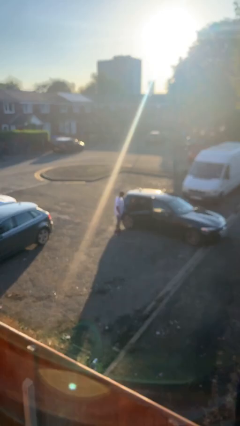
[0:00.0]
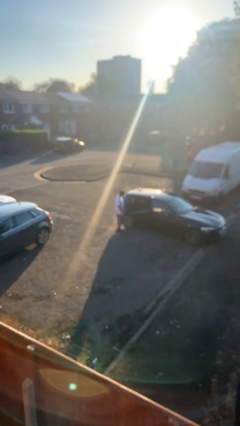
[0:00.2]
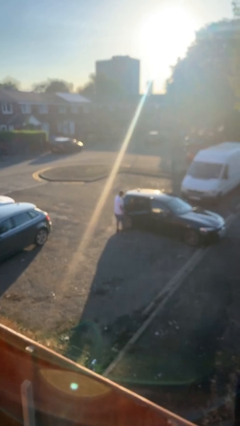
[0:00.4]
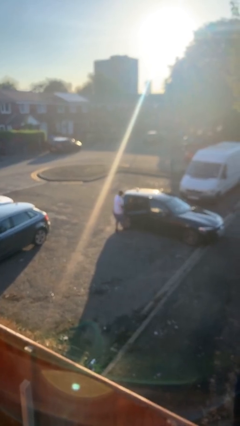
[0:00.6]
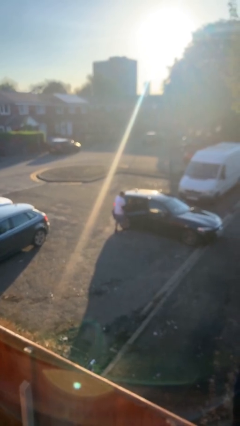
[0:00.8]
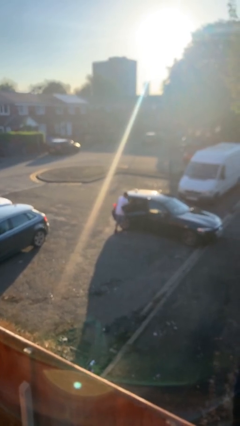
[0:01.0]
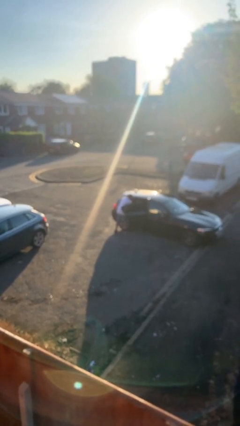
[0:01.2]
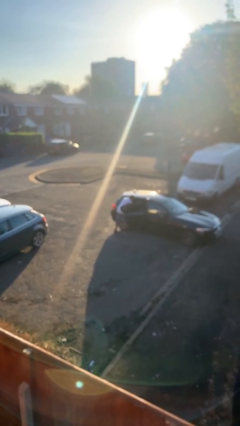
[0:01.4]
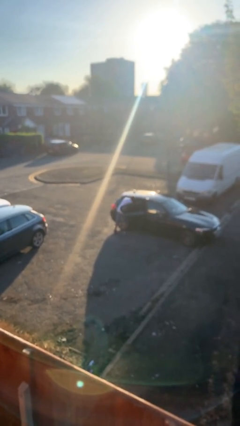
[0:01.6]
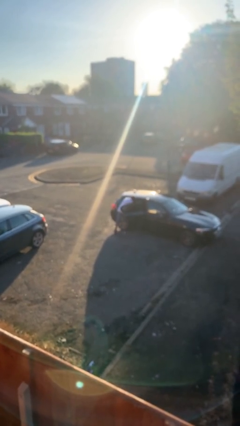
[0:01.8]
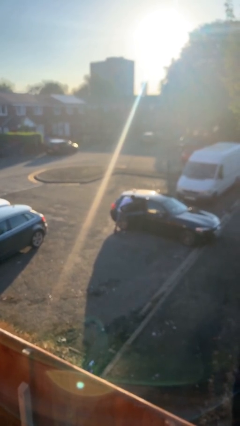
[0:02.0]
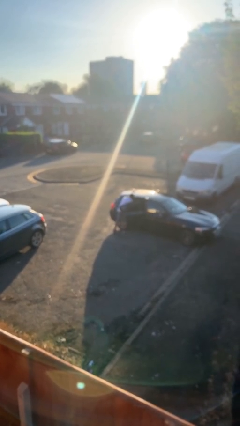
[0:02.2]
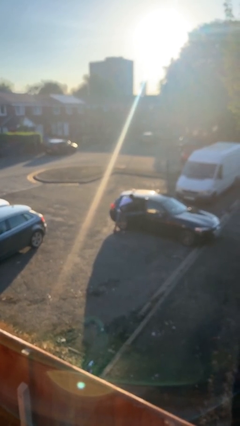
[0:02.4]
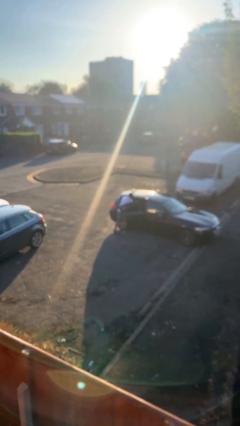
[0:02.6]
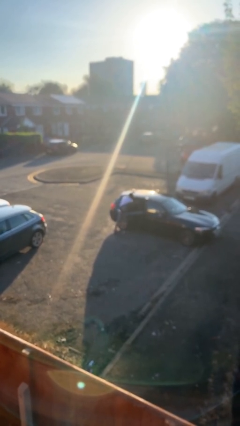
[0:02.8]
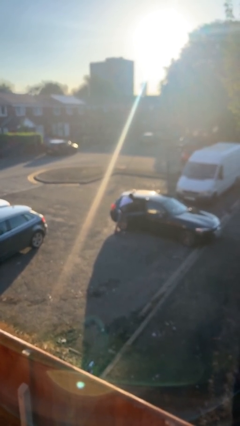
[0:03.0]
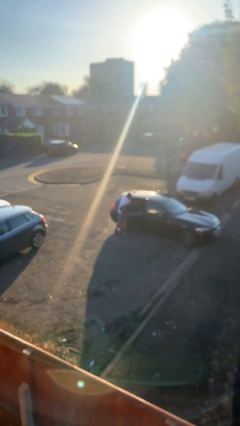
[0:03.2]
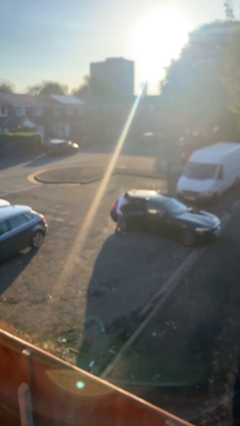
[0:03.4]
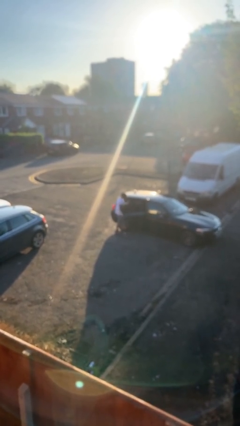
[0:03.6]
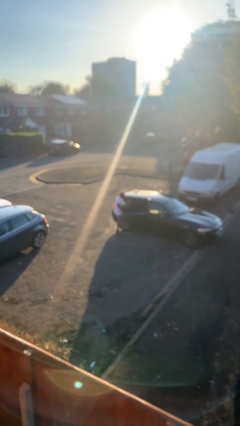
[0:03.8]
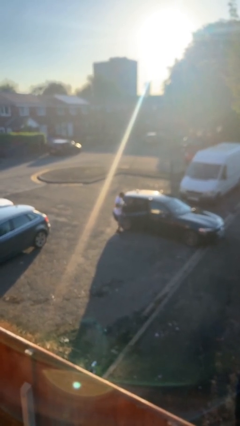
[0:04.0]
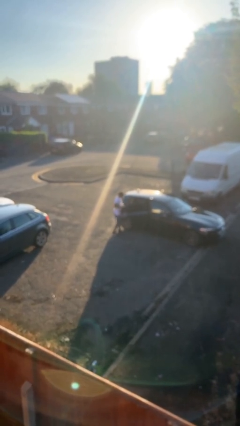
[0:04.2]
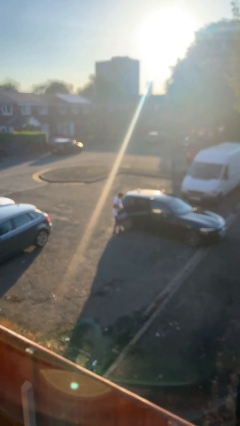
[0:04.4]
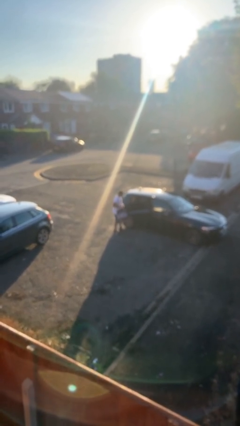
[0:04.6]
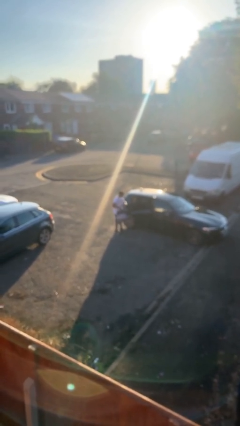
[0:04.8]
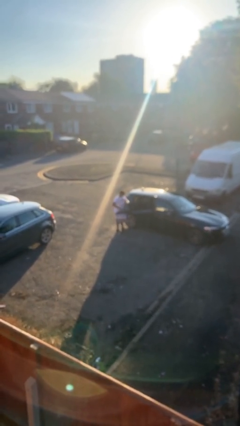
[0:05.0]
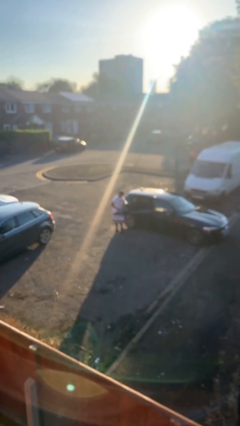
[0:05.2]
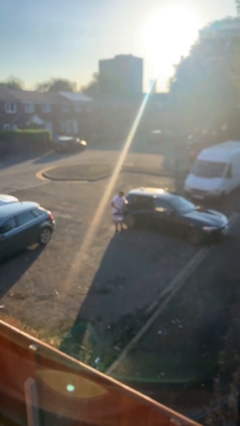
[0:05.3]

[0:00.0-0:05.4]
person unloads car

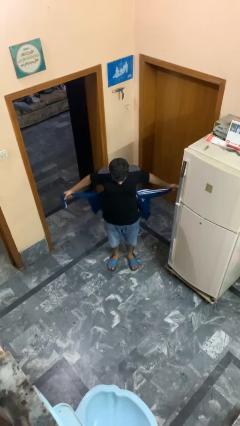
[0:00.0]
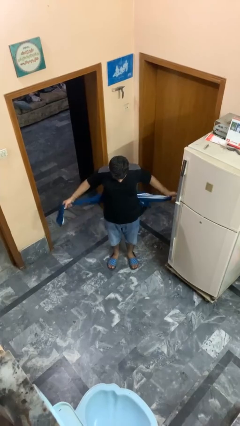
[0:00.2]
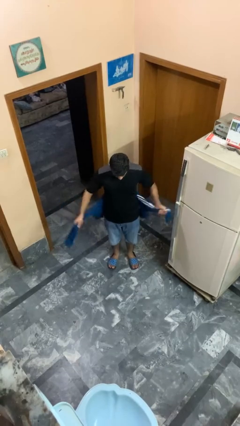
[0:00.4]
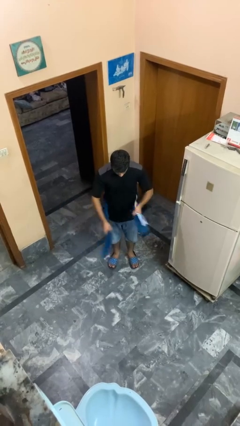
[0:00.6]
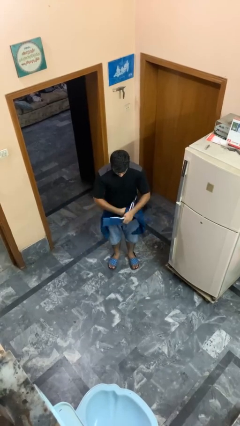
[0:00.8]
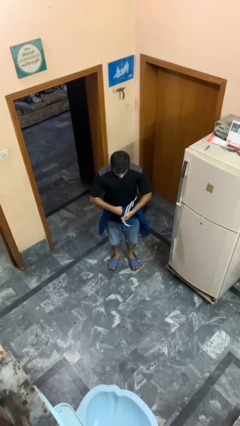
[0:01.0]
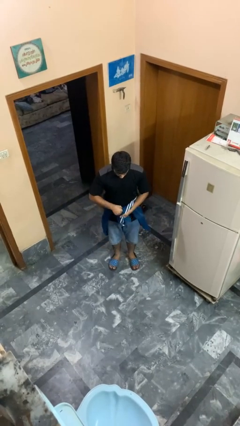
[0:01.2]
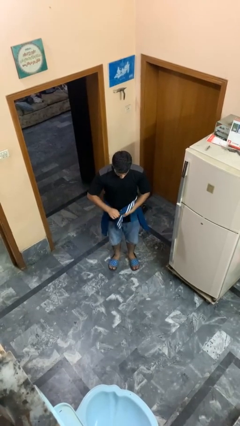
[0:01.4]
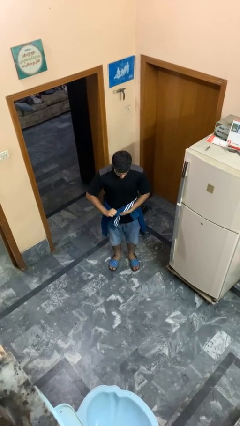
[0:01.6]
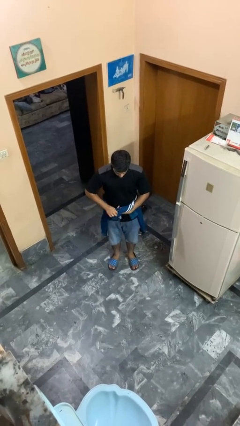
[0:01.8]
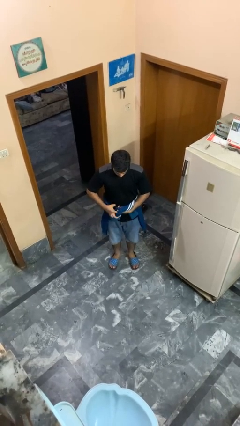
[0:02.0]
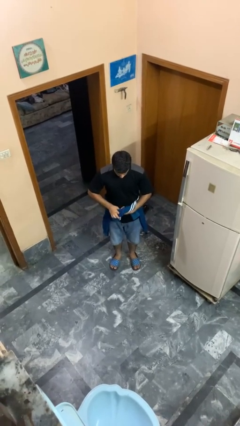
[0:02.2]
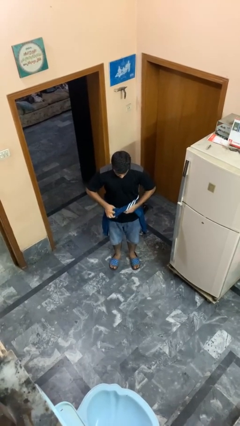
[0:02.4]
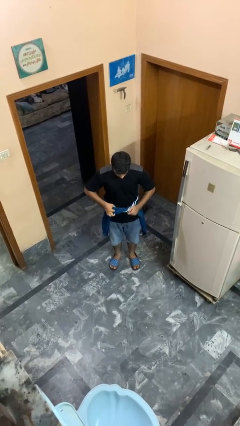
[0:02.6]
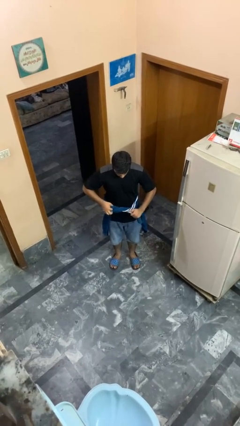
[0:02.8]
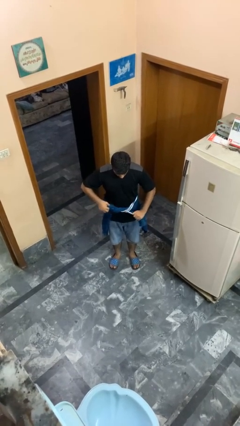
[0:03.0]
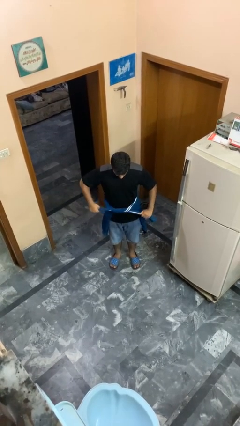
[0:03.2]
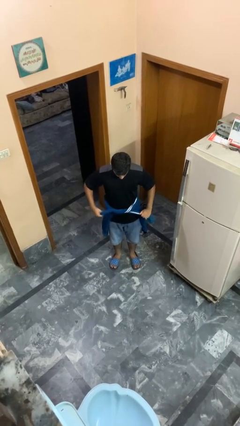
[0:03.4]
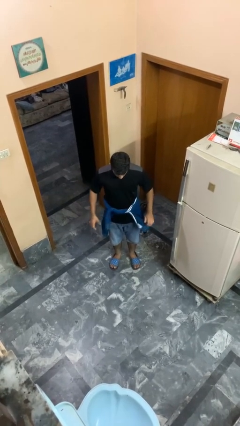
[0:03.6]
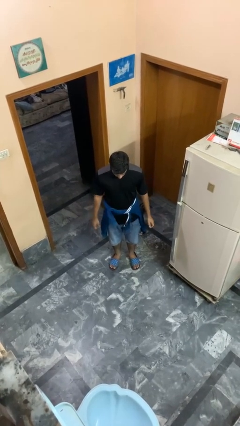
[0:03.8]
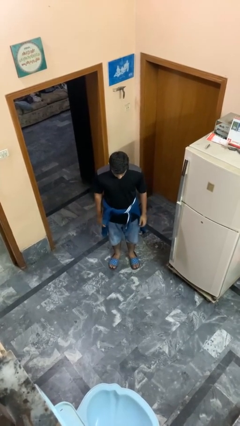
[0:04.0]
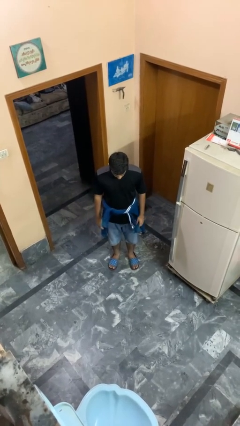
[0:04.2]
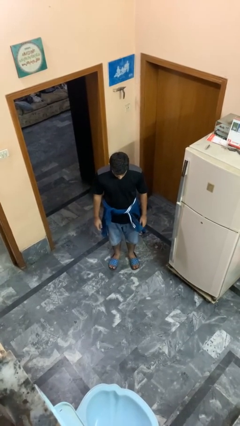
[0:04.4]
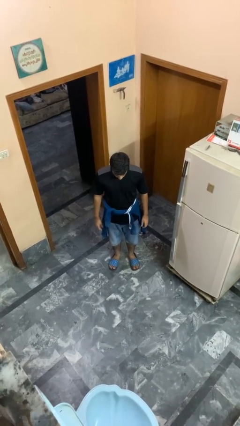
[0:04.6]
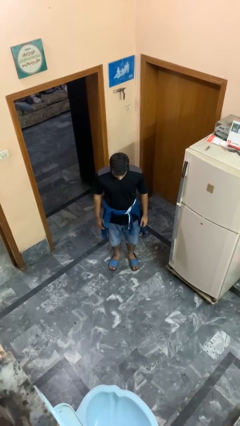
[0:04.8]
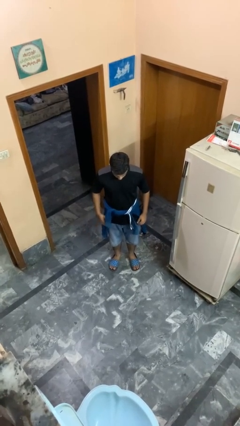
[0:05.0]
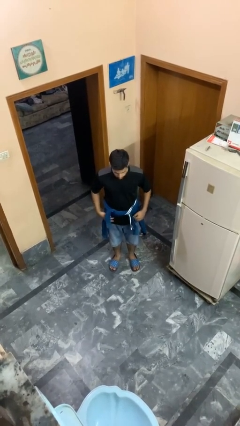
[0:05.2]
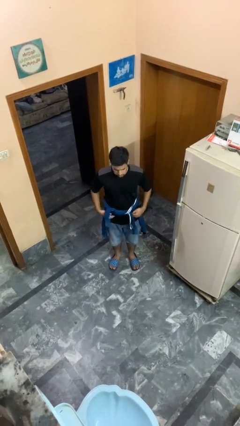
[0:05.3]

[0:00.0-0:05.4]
person ties jacket around waist

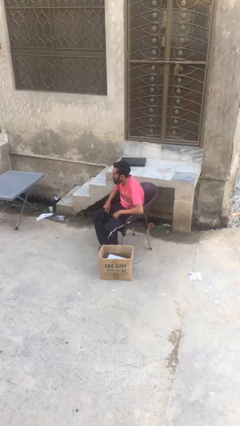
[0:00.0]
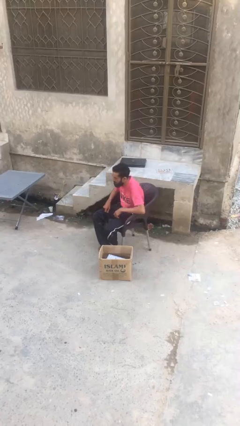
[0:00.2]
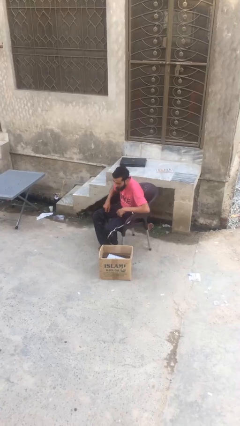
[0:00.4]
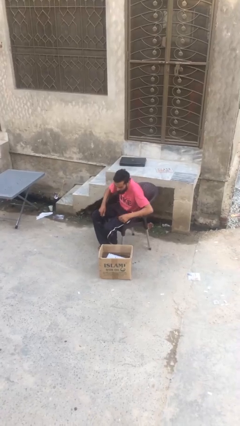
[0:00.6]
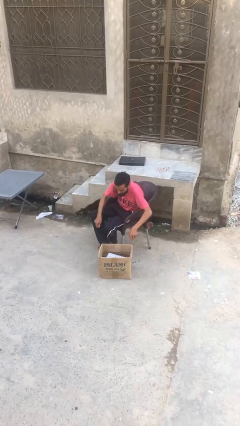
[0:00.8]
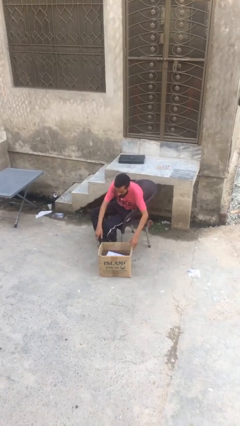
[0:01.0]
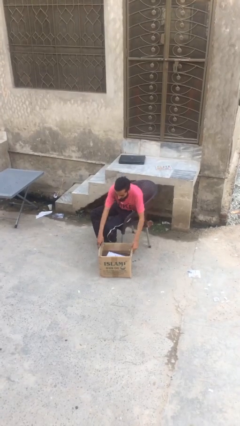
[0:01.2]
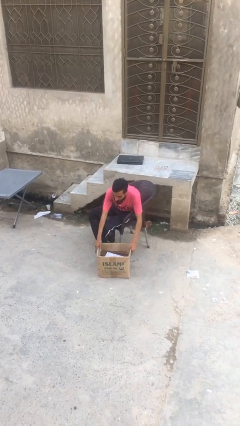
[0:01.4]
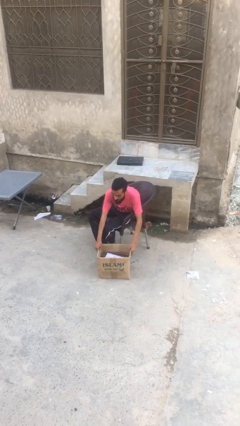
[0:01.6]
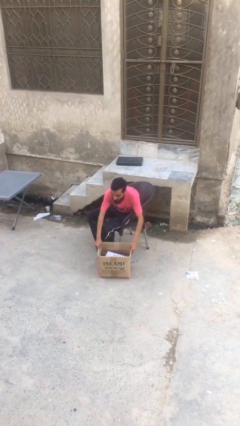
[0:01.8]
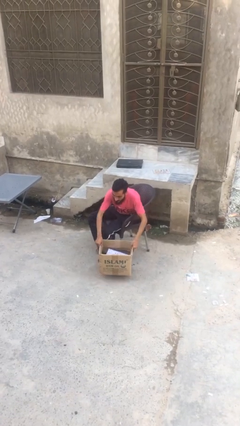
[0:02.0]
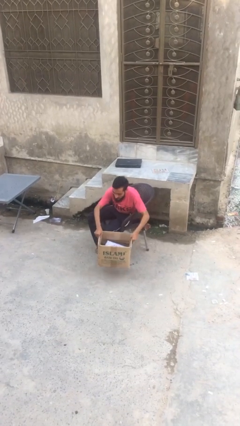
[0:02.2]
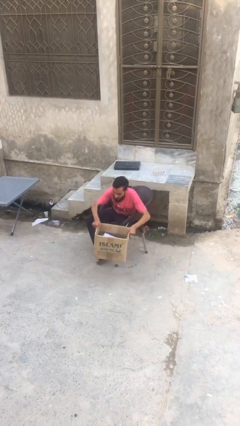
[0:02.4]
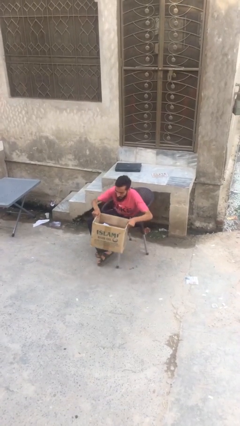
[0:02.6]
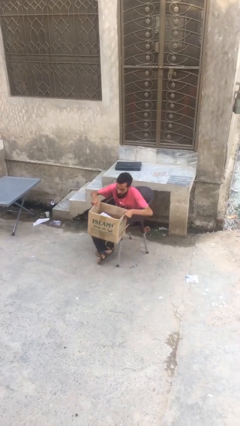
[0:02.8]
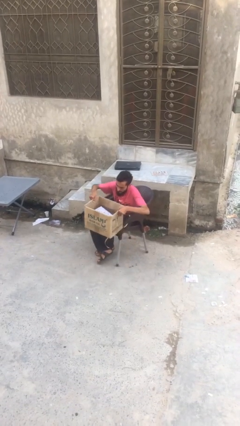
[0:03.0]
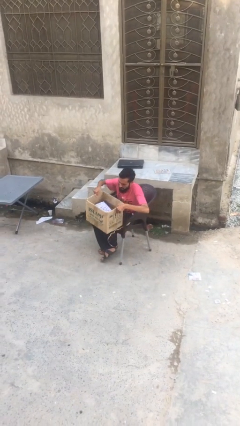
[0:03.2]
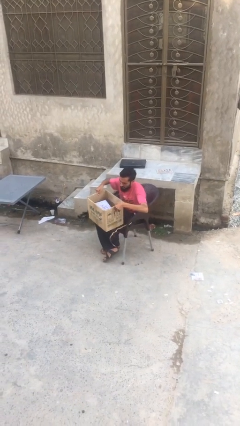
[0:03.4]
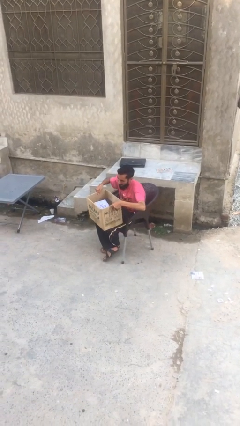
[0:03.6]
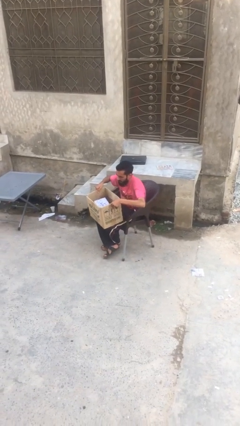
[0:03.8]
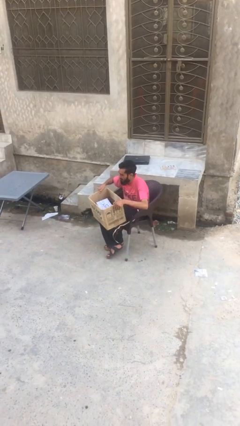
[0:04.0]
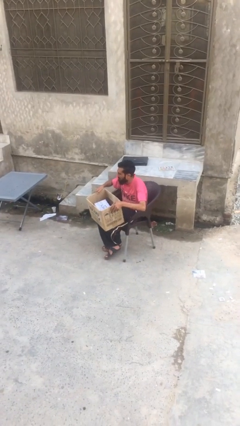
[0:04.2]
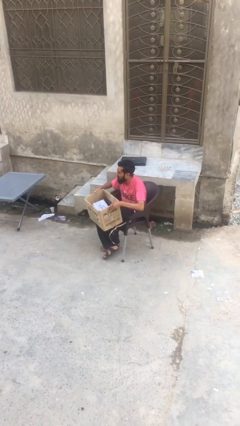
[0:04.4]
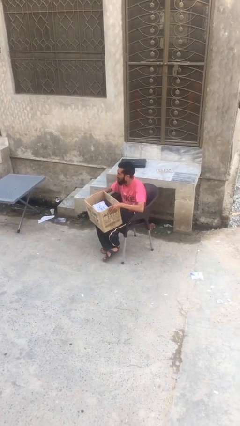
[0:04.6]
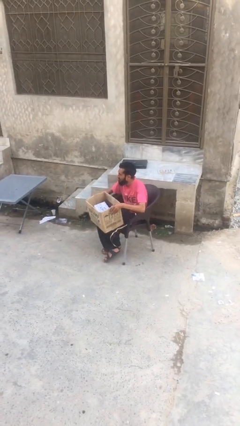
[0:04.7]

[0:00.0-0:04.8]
person picks up object from floor

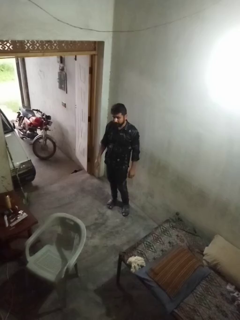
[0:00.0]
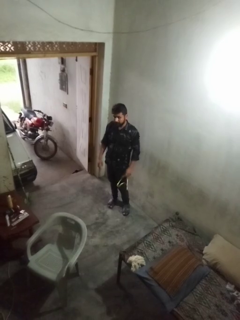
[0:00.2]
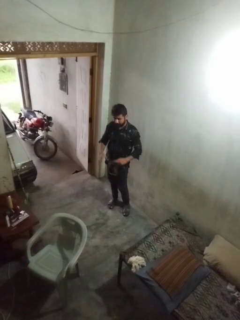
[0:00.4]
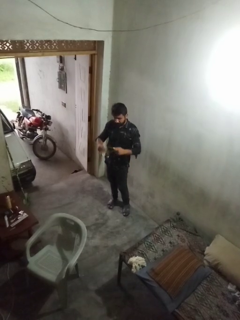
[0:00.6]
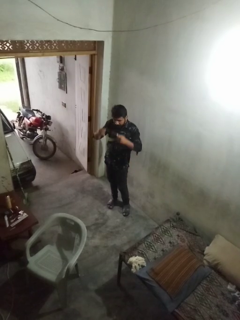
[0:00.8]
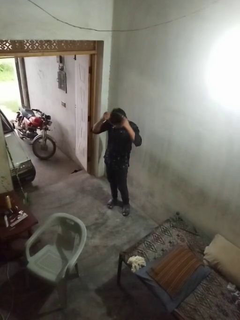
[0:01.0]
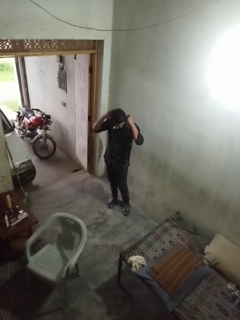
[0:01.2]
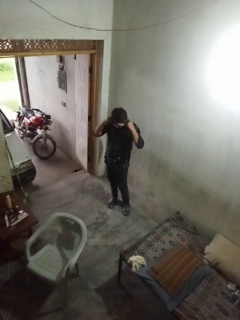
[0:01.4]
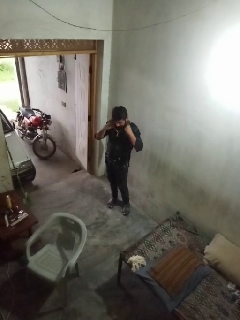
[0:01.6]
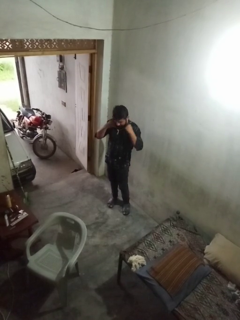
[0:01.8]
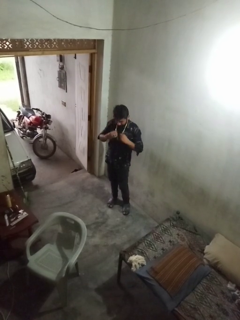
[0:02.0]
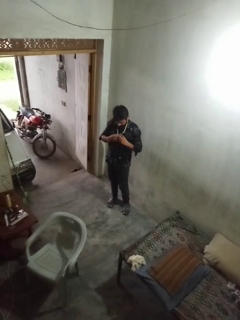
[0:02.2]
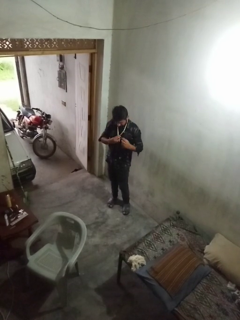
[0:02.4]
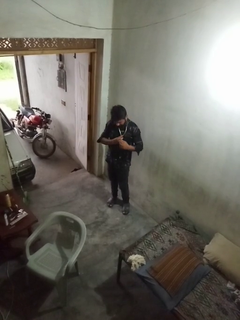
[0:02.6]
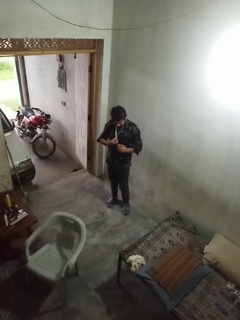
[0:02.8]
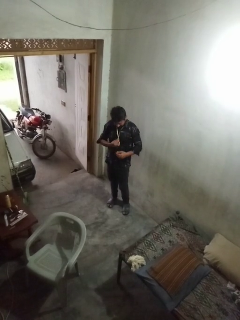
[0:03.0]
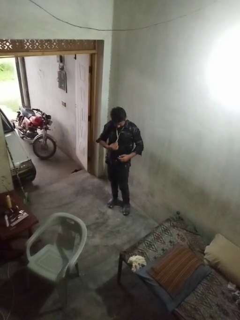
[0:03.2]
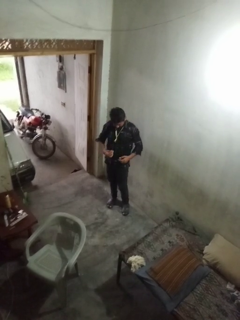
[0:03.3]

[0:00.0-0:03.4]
person puts on necklace
